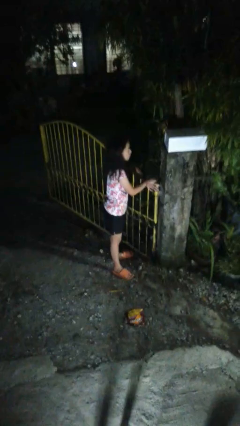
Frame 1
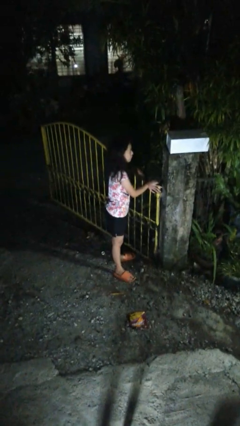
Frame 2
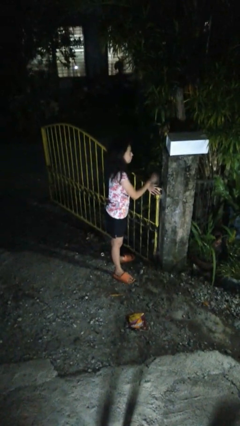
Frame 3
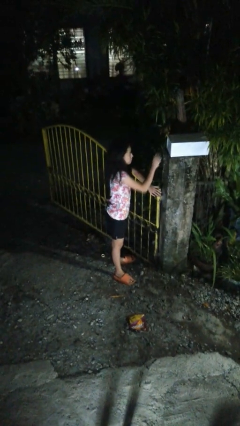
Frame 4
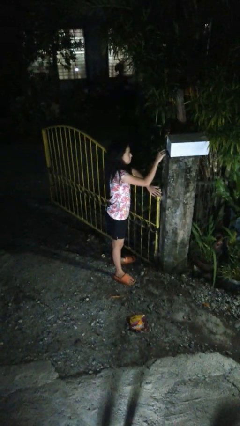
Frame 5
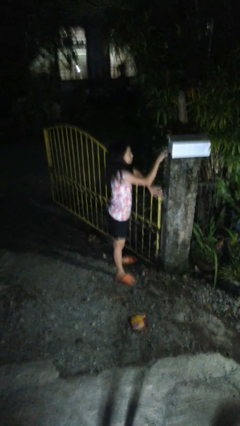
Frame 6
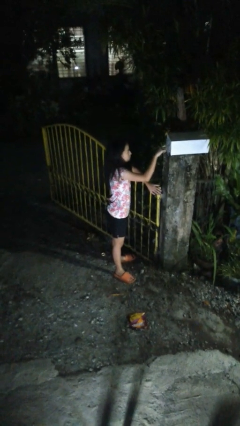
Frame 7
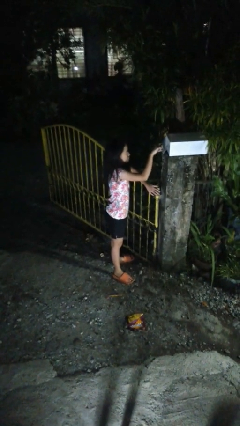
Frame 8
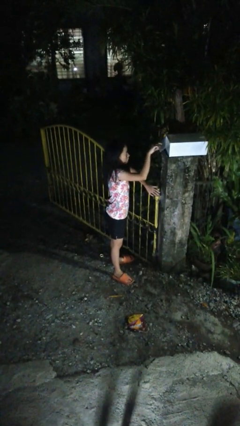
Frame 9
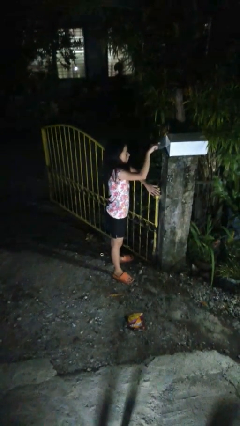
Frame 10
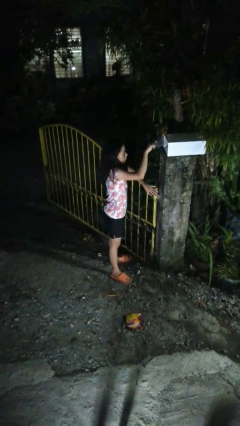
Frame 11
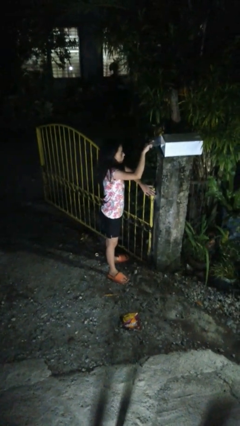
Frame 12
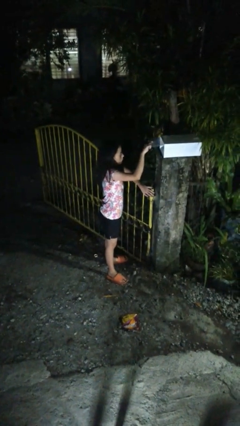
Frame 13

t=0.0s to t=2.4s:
person opens mailbox

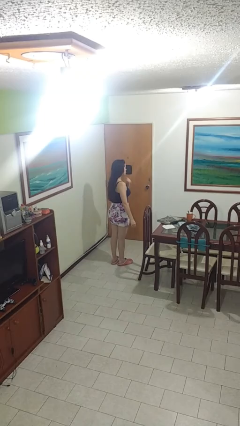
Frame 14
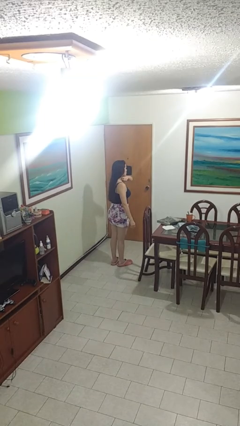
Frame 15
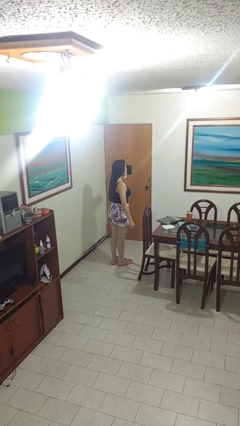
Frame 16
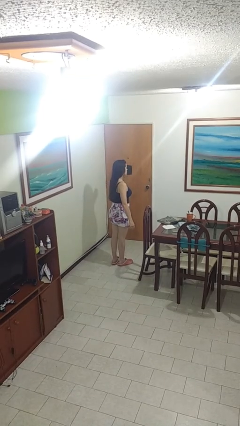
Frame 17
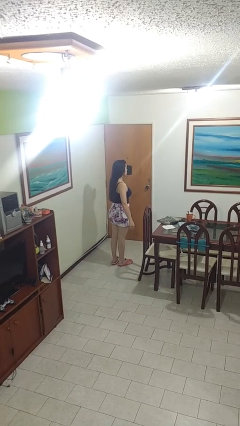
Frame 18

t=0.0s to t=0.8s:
person gestures cut

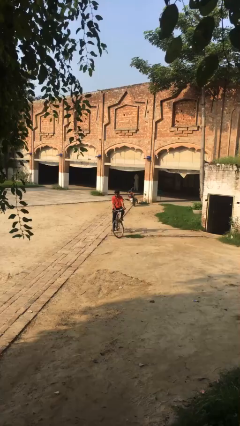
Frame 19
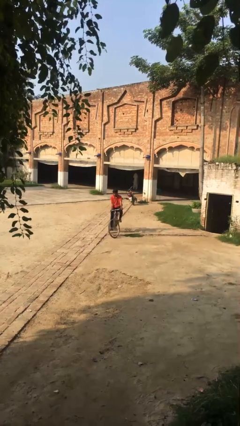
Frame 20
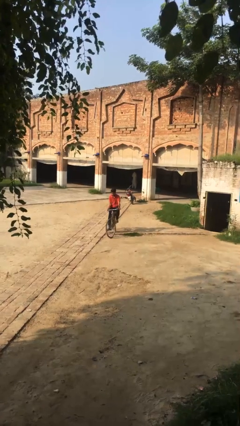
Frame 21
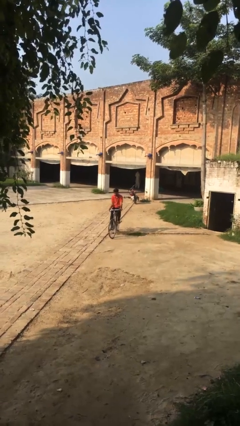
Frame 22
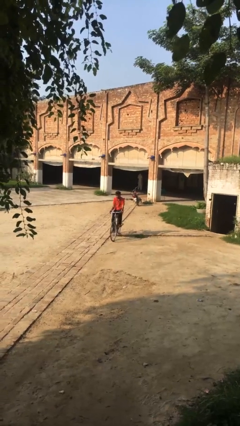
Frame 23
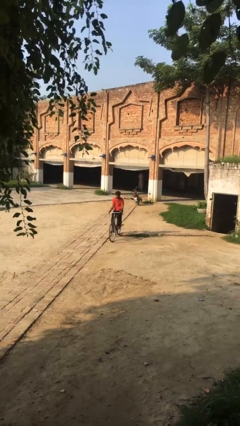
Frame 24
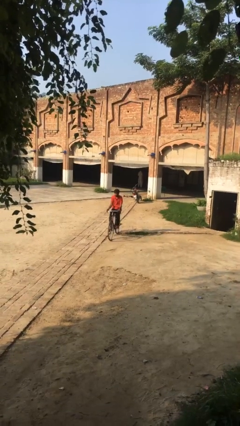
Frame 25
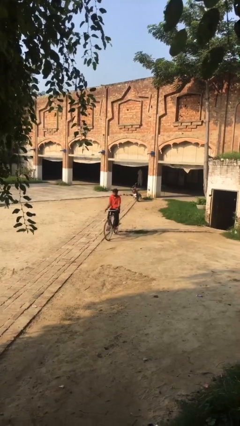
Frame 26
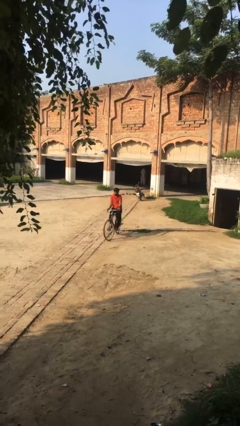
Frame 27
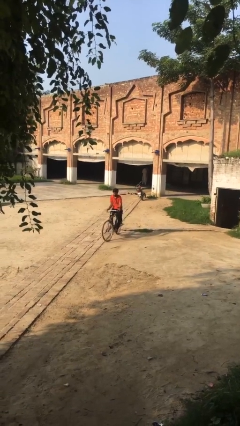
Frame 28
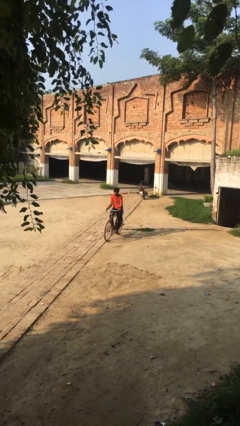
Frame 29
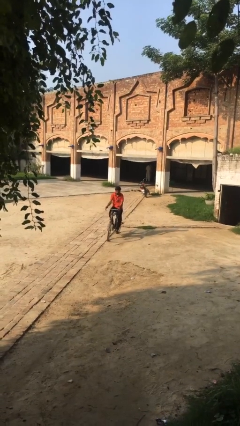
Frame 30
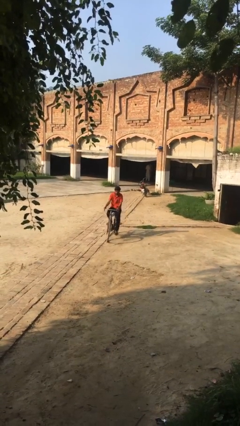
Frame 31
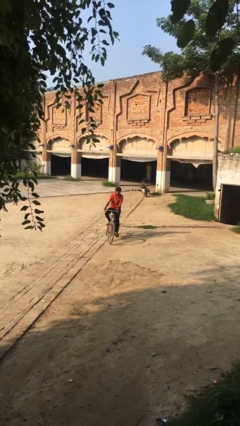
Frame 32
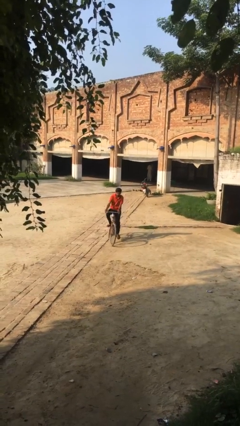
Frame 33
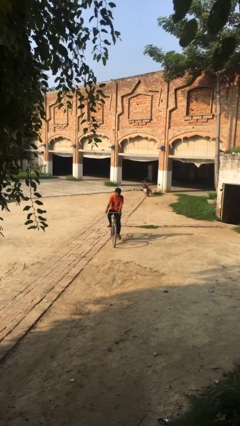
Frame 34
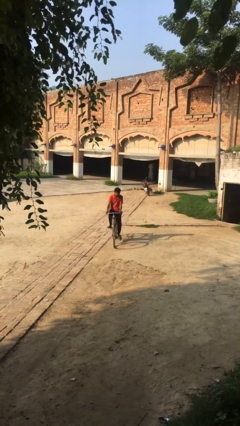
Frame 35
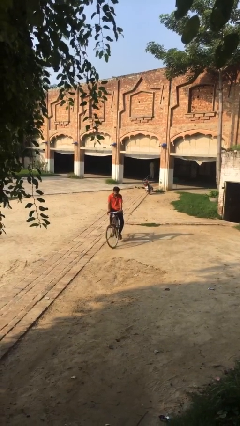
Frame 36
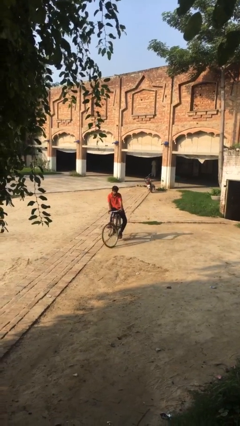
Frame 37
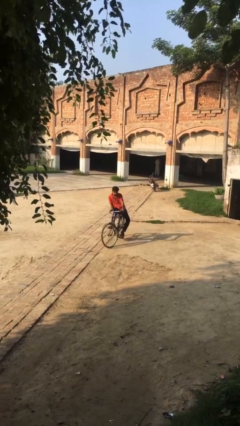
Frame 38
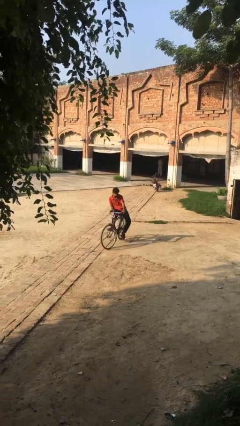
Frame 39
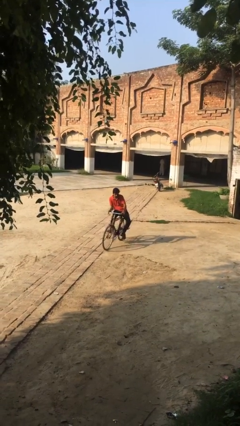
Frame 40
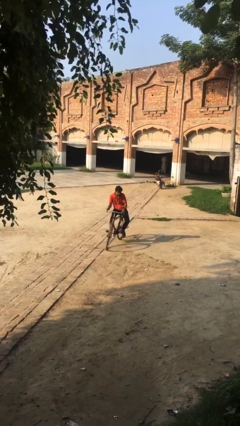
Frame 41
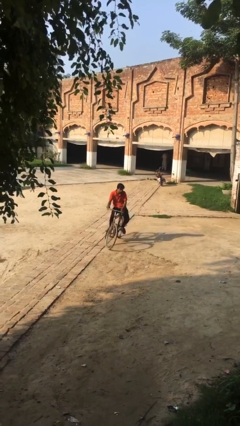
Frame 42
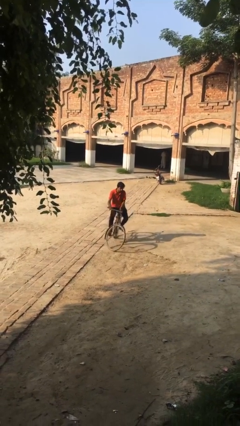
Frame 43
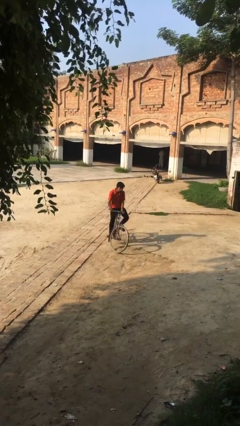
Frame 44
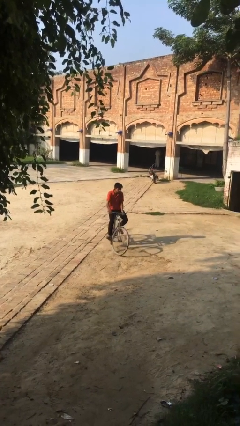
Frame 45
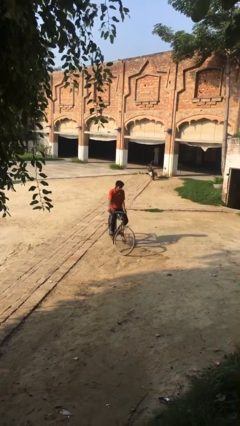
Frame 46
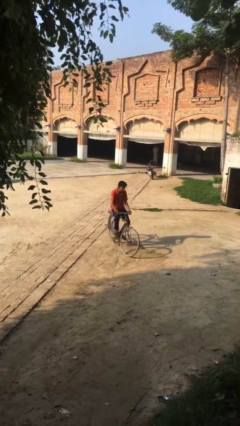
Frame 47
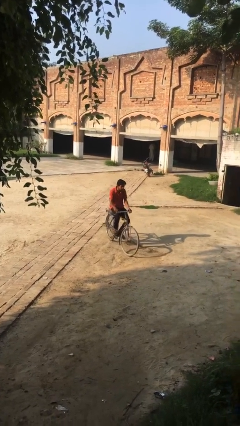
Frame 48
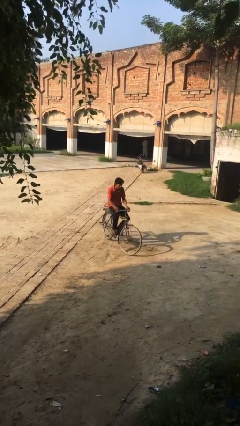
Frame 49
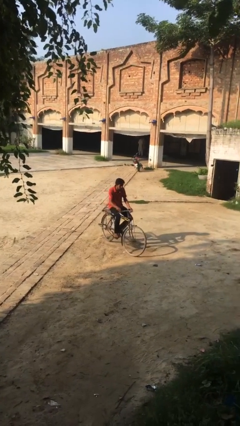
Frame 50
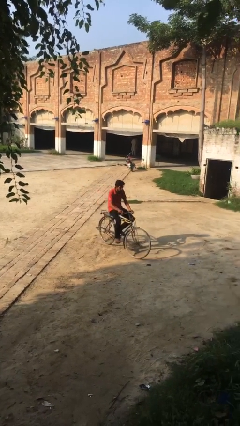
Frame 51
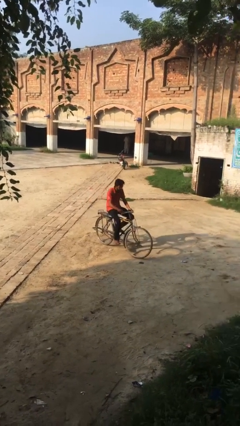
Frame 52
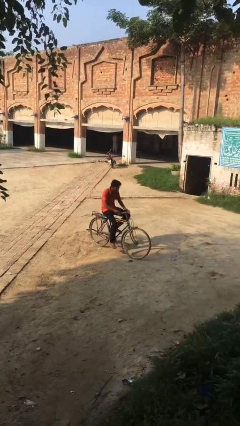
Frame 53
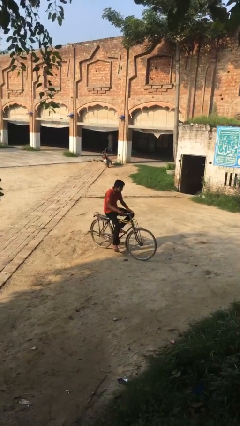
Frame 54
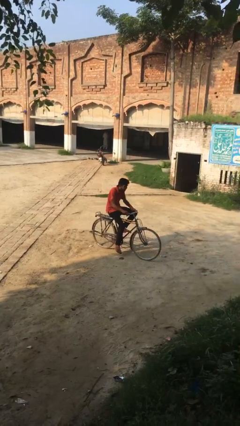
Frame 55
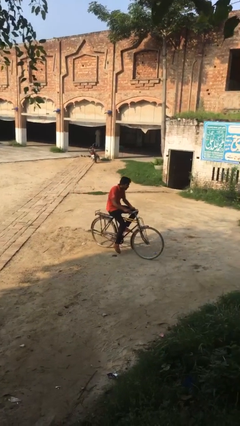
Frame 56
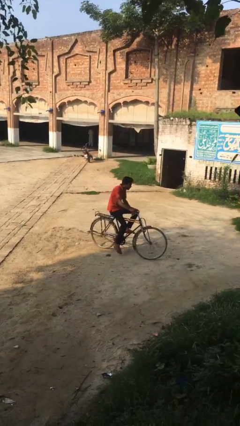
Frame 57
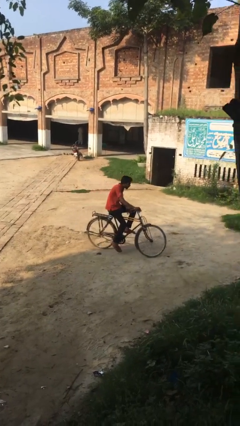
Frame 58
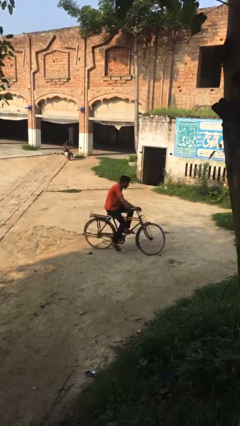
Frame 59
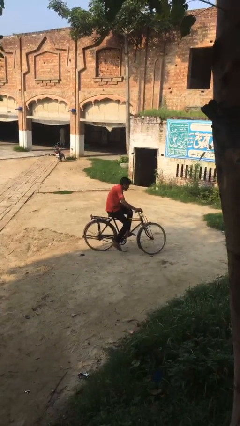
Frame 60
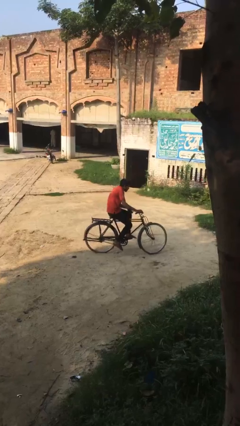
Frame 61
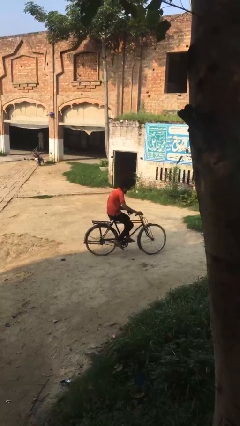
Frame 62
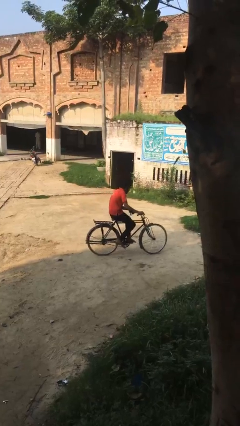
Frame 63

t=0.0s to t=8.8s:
person rides bicycle

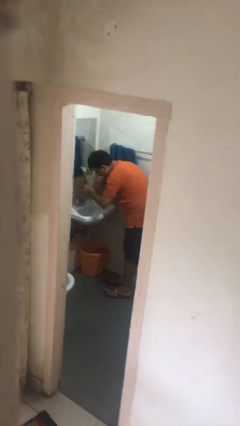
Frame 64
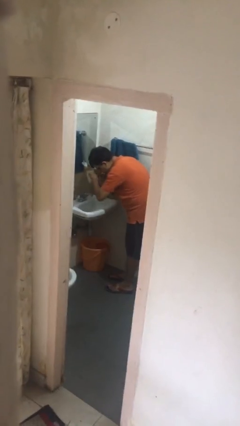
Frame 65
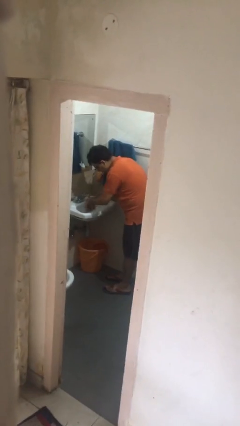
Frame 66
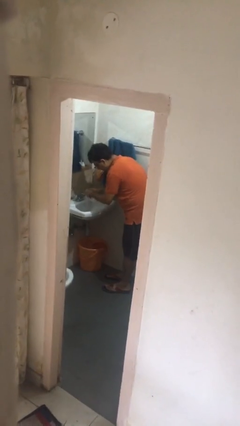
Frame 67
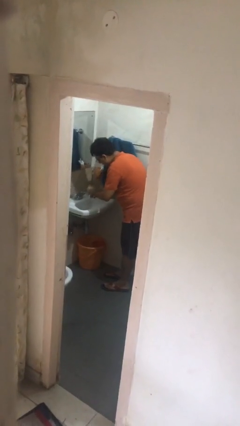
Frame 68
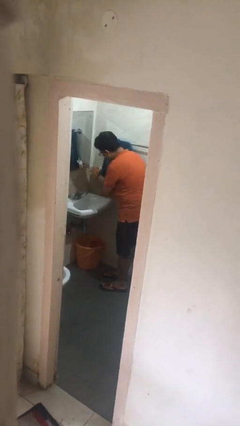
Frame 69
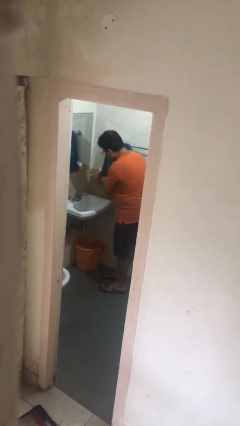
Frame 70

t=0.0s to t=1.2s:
person washes hands

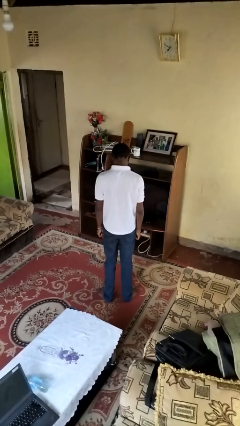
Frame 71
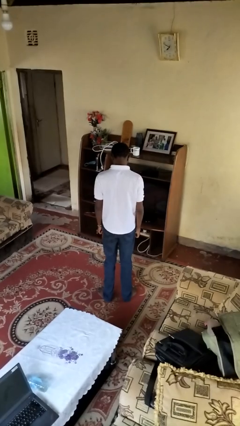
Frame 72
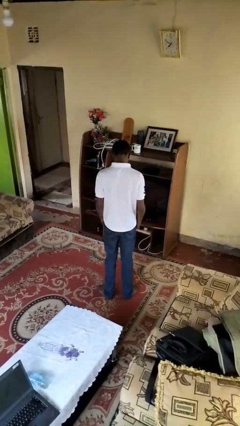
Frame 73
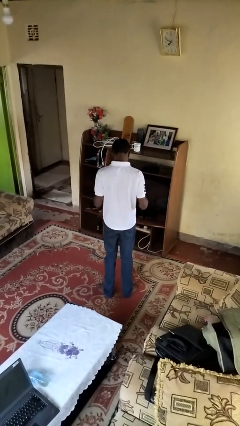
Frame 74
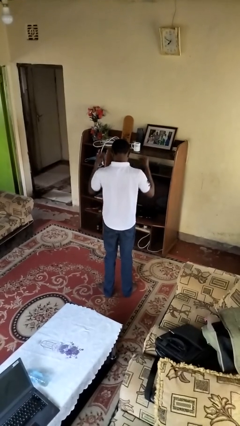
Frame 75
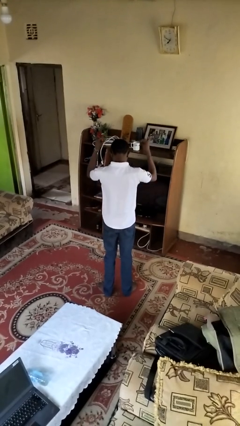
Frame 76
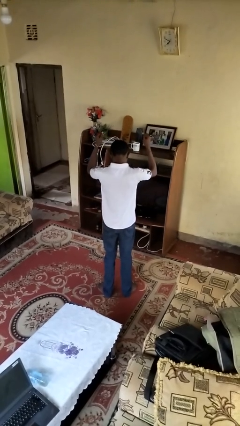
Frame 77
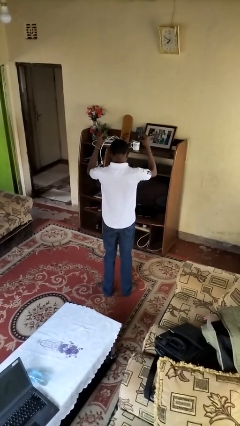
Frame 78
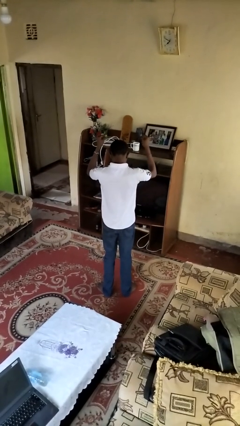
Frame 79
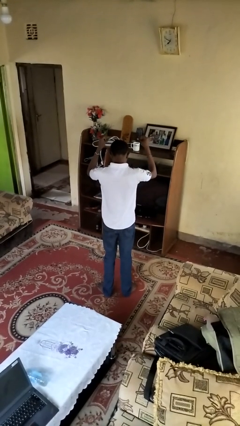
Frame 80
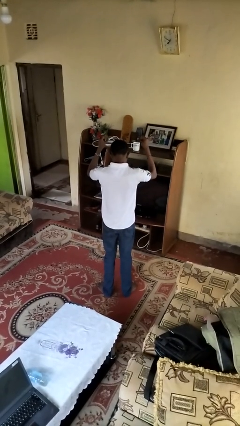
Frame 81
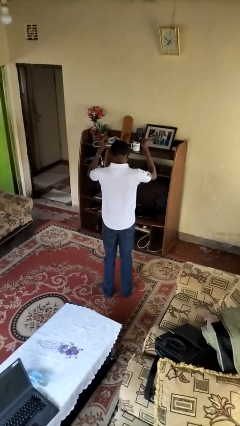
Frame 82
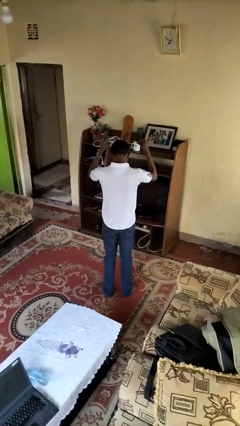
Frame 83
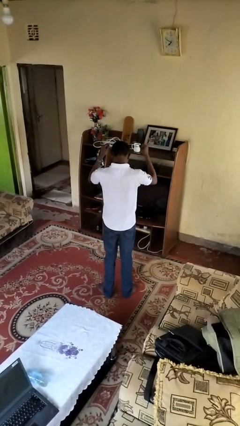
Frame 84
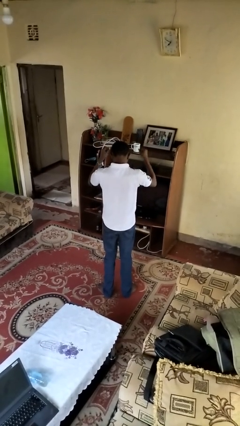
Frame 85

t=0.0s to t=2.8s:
person snaps fingers

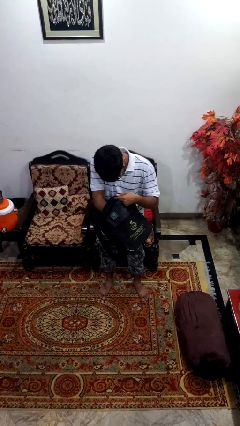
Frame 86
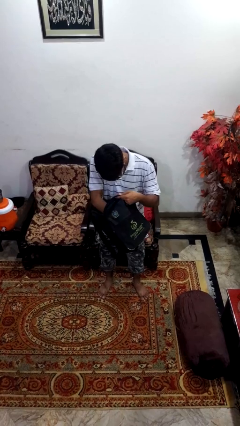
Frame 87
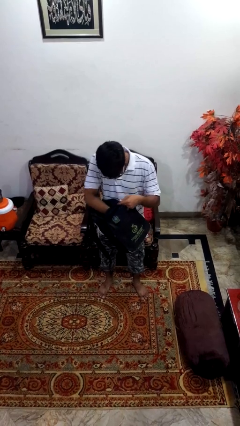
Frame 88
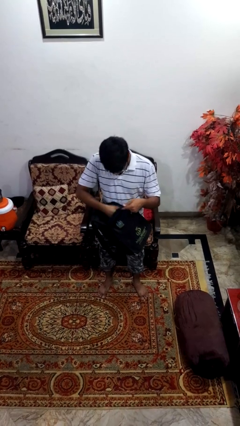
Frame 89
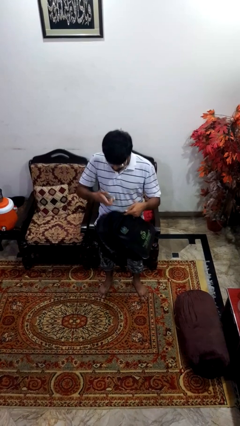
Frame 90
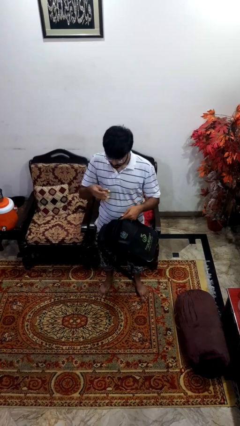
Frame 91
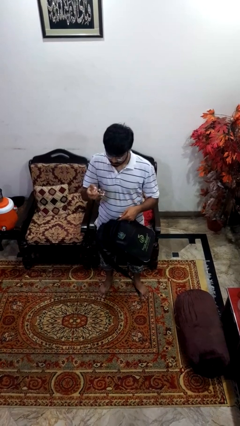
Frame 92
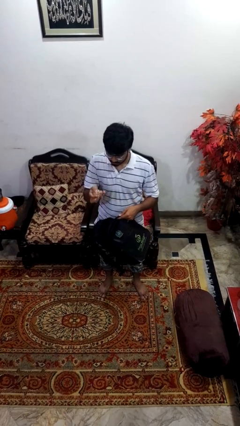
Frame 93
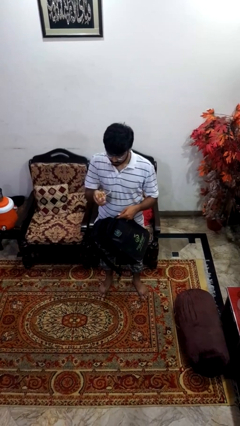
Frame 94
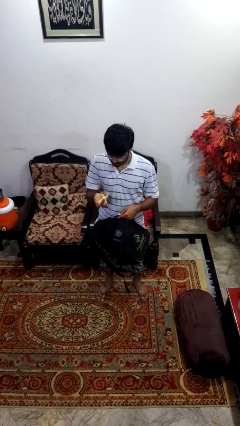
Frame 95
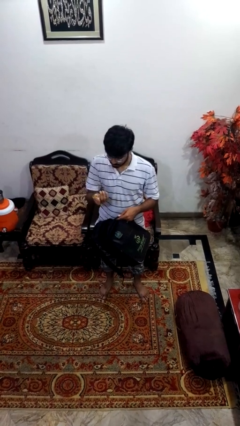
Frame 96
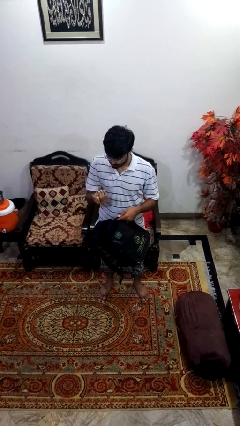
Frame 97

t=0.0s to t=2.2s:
person takes object from backpack
